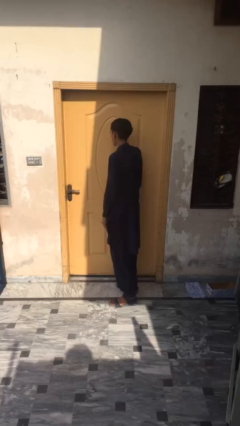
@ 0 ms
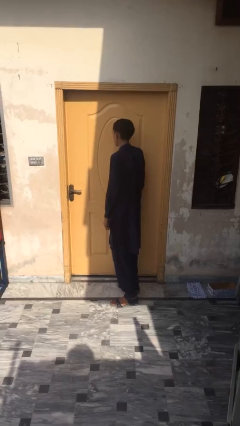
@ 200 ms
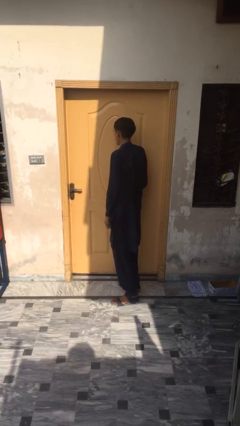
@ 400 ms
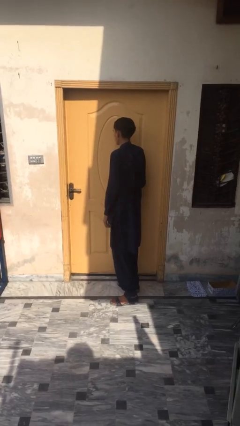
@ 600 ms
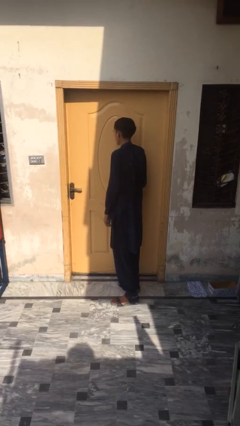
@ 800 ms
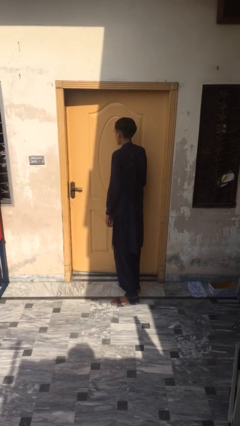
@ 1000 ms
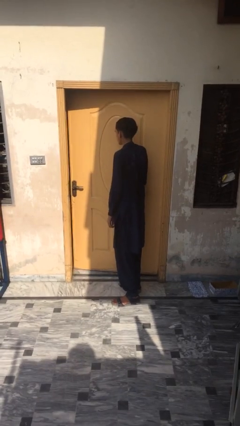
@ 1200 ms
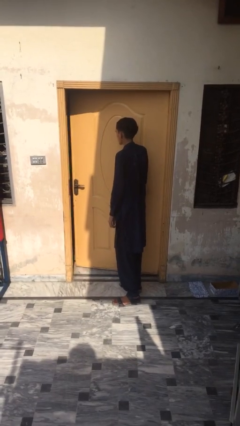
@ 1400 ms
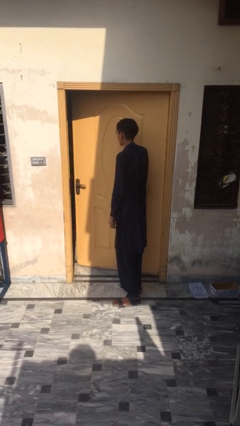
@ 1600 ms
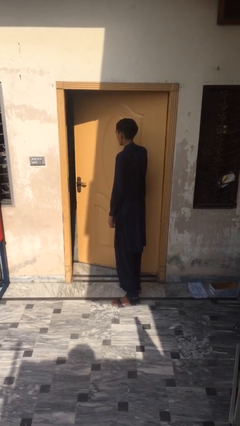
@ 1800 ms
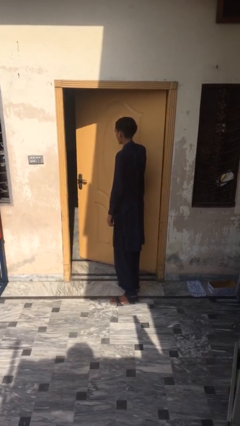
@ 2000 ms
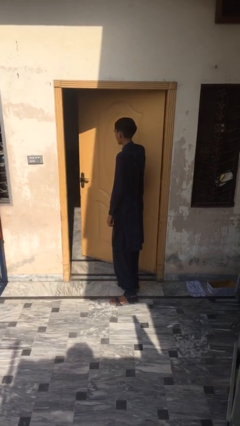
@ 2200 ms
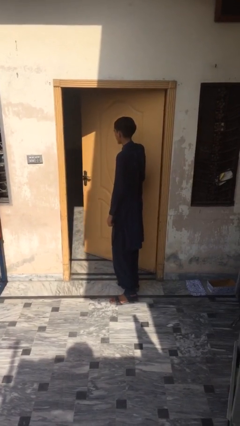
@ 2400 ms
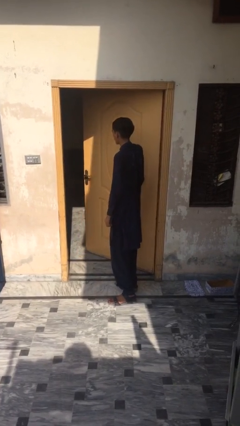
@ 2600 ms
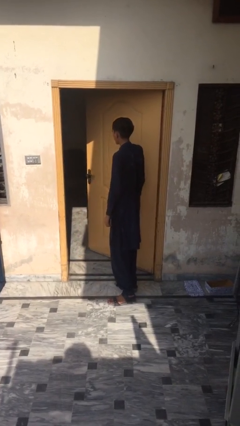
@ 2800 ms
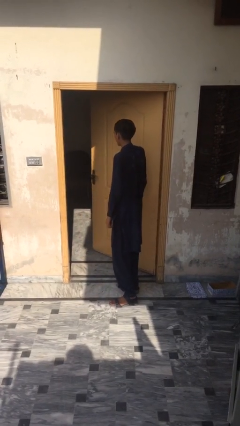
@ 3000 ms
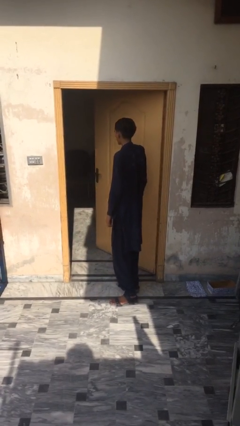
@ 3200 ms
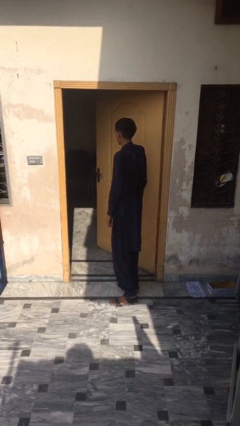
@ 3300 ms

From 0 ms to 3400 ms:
person opens facility door

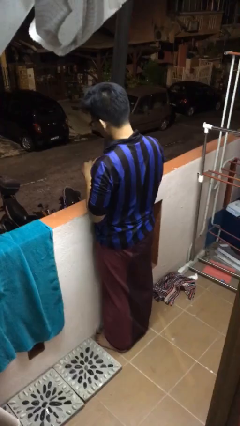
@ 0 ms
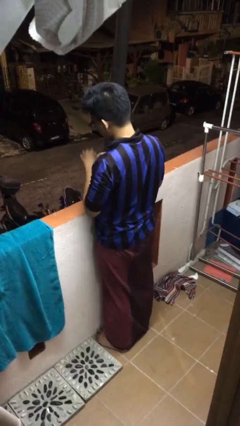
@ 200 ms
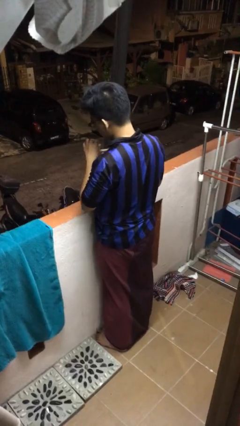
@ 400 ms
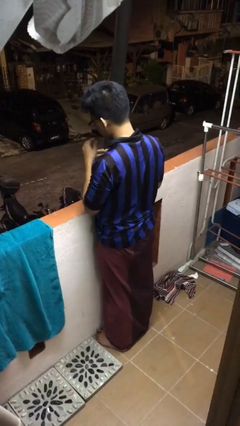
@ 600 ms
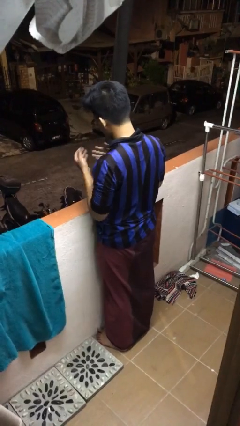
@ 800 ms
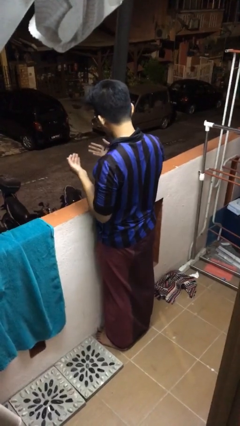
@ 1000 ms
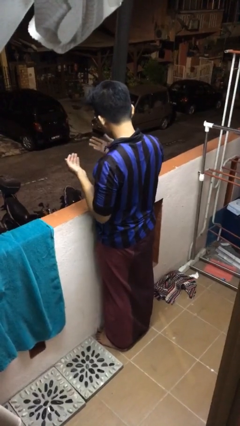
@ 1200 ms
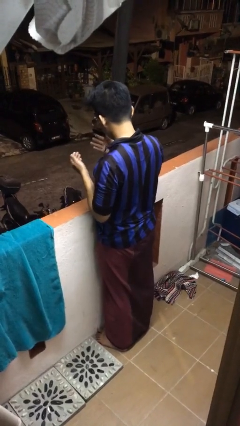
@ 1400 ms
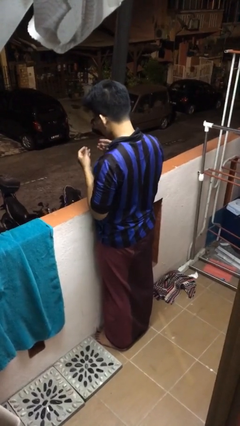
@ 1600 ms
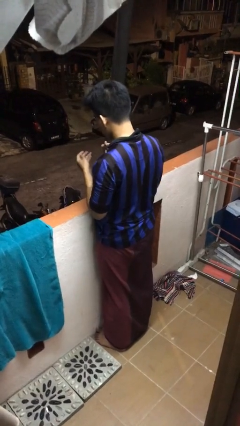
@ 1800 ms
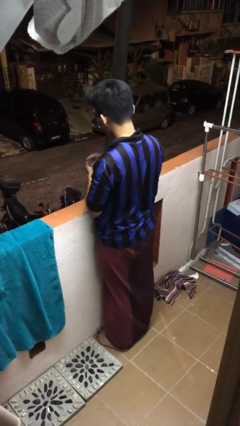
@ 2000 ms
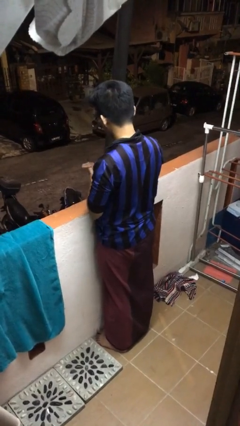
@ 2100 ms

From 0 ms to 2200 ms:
person blows into hands

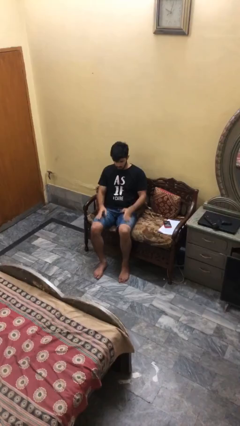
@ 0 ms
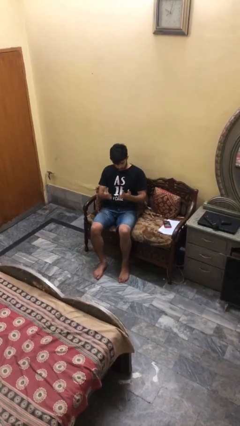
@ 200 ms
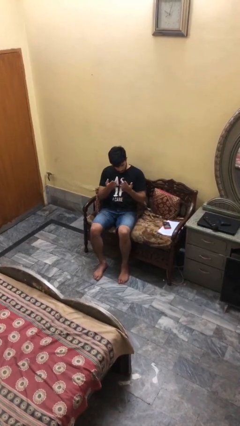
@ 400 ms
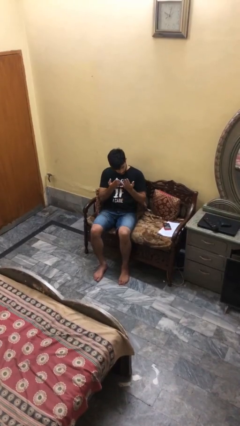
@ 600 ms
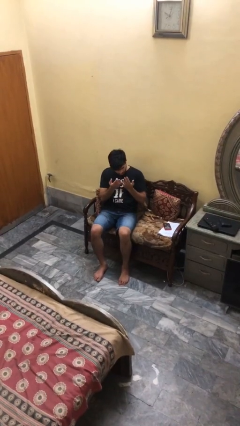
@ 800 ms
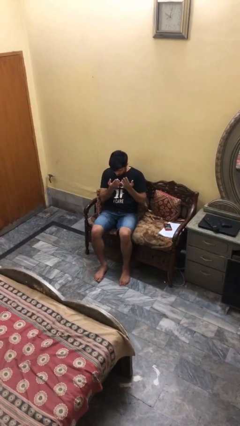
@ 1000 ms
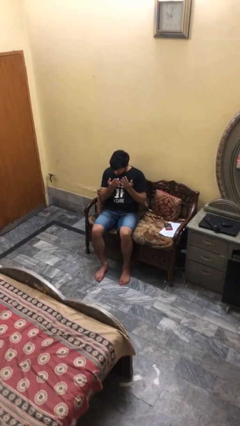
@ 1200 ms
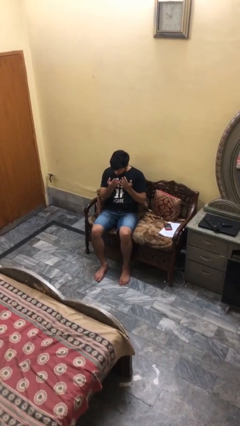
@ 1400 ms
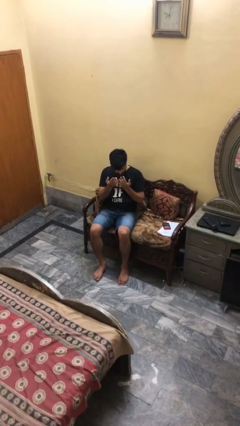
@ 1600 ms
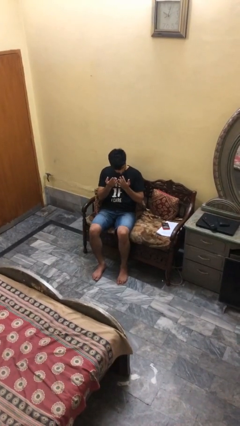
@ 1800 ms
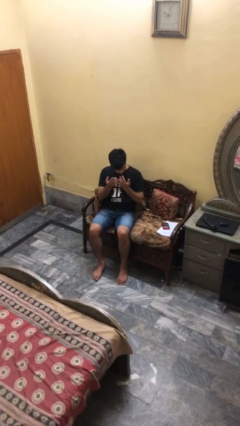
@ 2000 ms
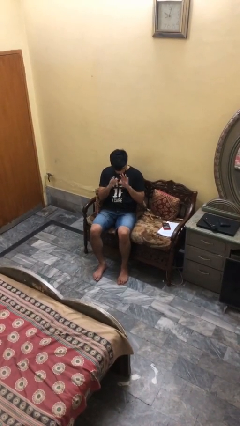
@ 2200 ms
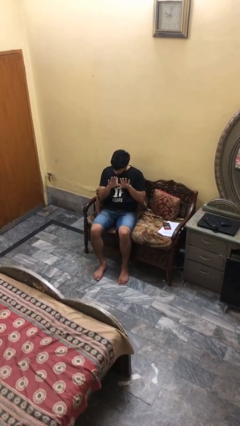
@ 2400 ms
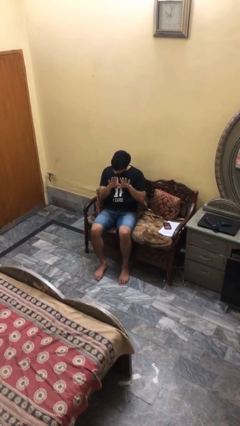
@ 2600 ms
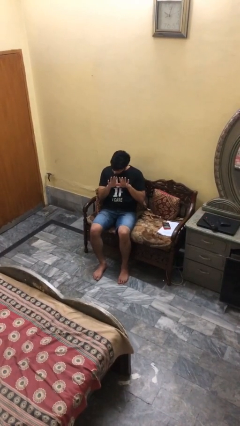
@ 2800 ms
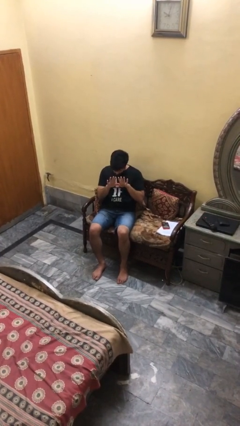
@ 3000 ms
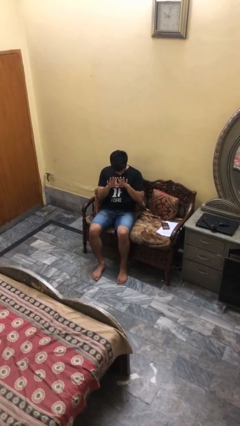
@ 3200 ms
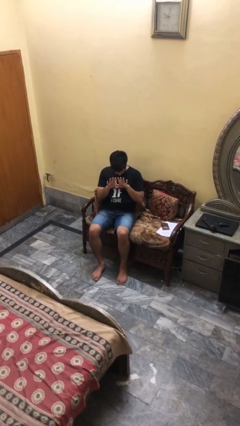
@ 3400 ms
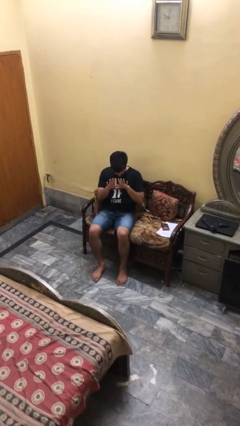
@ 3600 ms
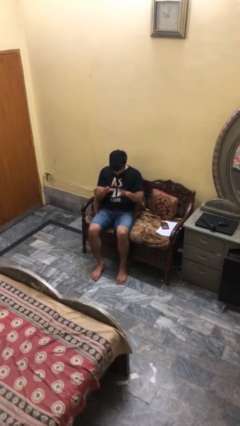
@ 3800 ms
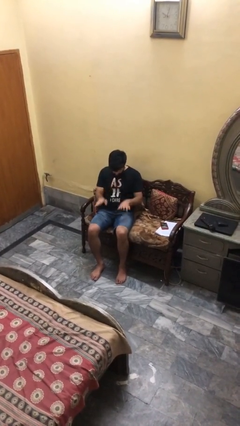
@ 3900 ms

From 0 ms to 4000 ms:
person looks at hands in lap

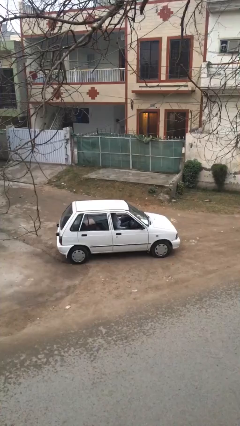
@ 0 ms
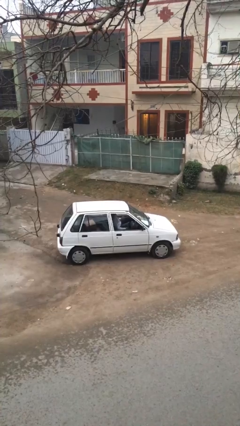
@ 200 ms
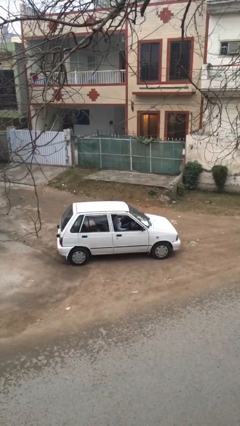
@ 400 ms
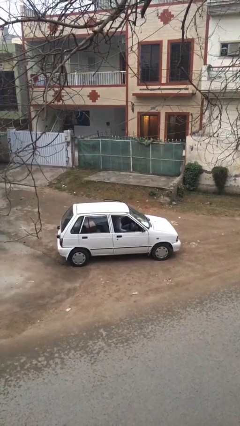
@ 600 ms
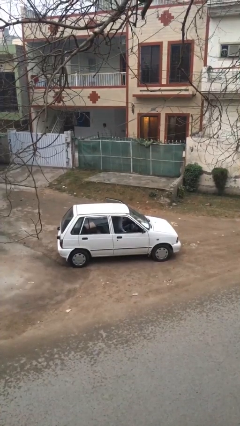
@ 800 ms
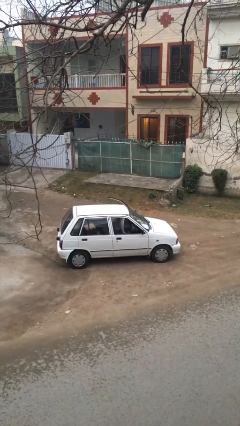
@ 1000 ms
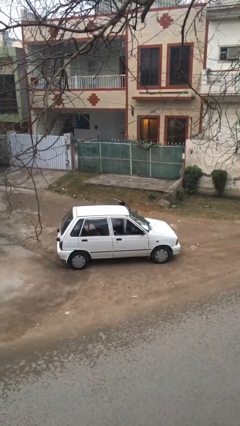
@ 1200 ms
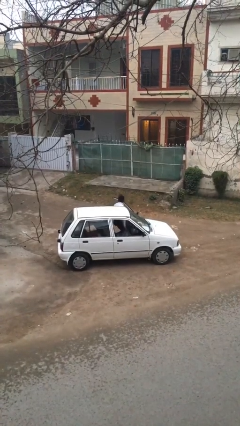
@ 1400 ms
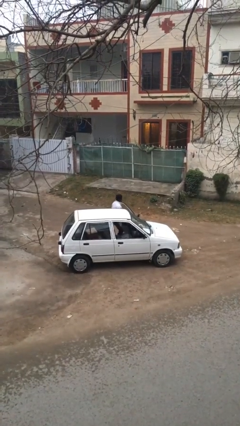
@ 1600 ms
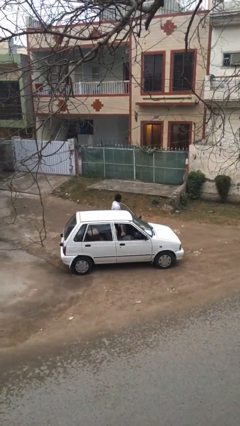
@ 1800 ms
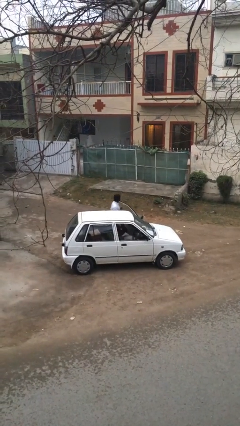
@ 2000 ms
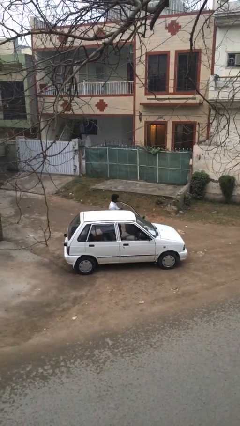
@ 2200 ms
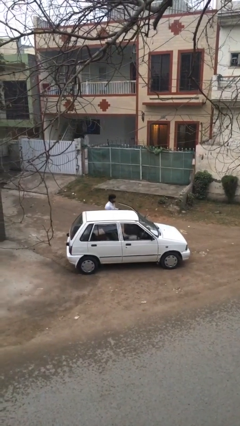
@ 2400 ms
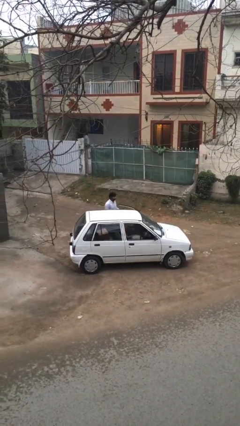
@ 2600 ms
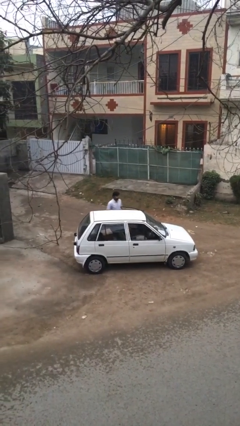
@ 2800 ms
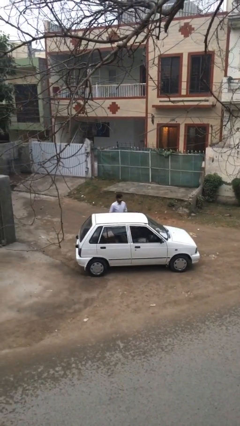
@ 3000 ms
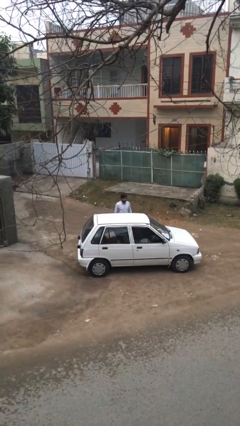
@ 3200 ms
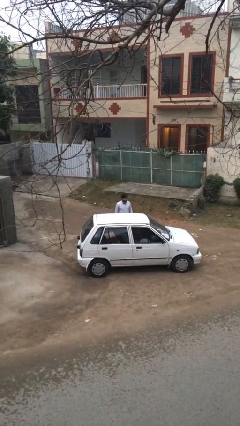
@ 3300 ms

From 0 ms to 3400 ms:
person exits car

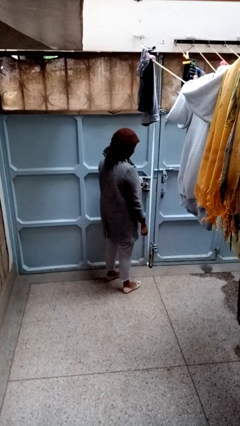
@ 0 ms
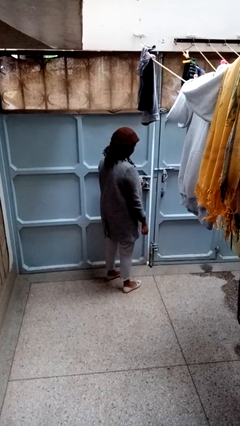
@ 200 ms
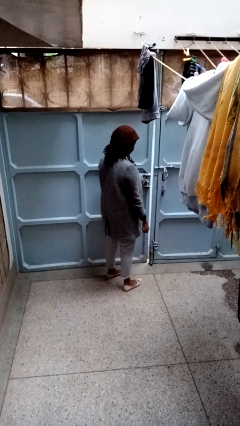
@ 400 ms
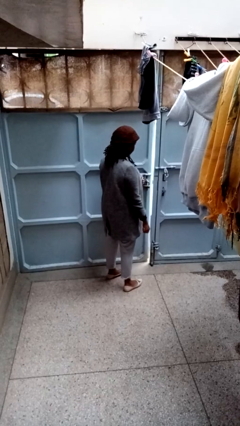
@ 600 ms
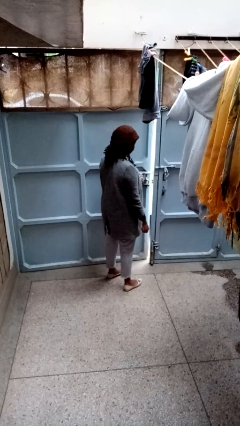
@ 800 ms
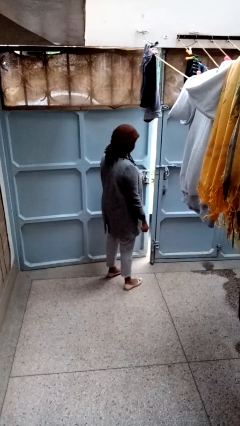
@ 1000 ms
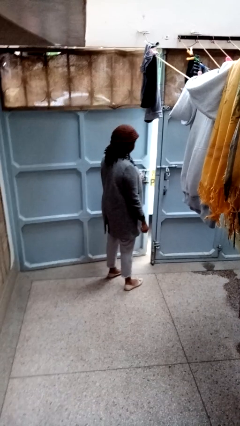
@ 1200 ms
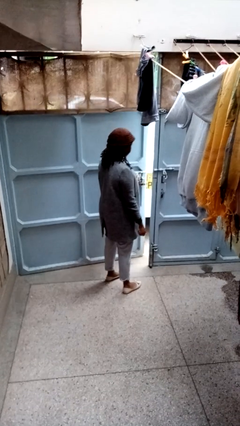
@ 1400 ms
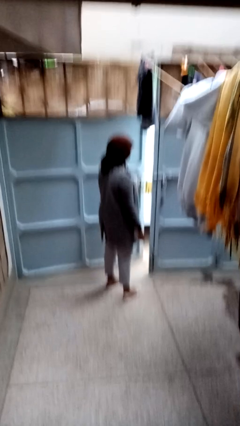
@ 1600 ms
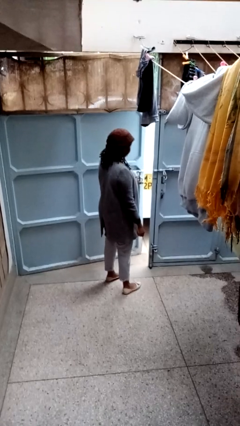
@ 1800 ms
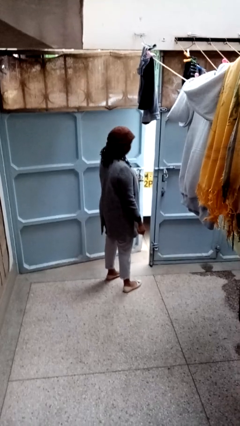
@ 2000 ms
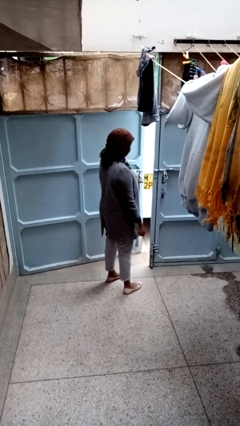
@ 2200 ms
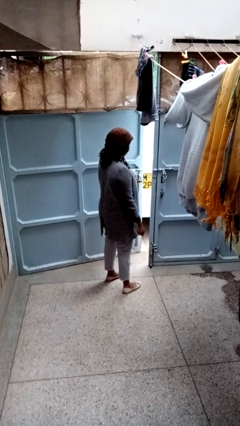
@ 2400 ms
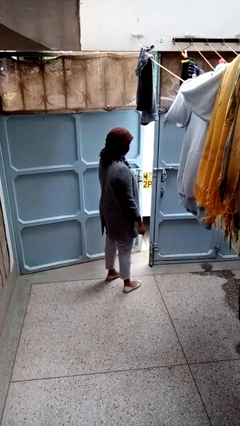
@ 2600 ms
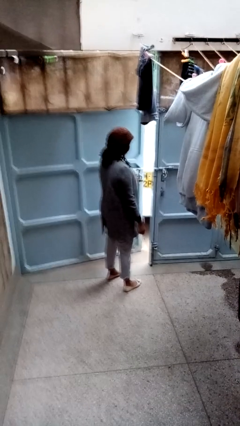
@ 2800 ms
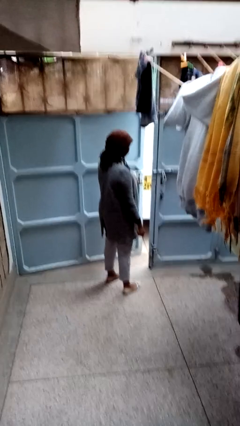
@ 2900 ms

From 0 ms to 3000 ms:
person opens gate

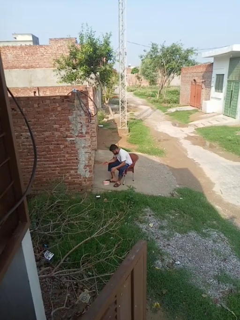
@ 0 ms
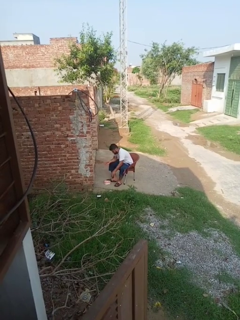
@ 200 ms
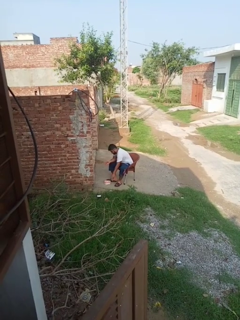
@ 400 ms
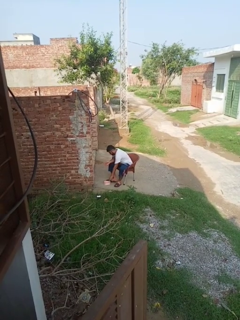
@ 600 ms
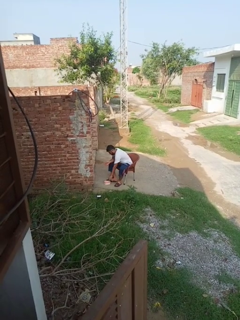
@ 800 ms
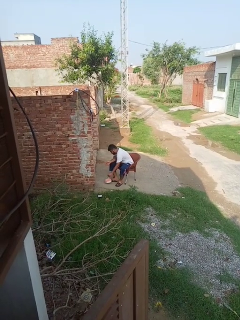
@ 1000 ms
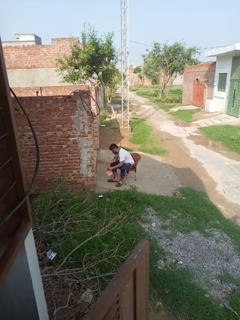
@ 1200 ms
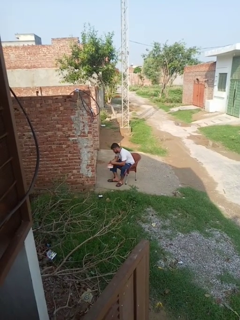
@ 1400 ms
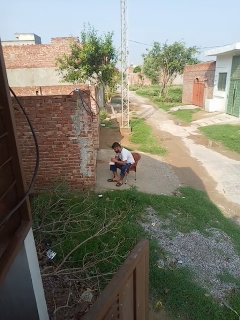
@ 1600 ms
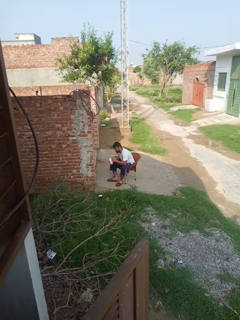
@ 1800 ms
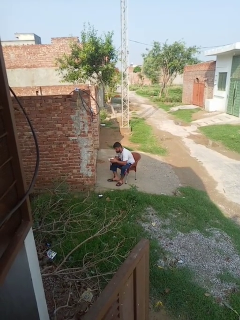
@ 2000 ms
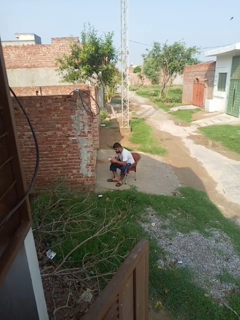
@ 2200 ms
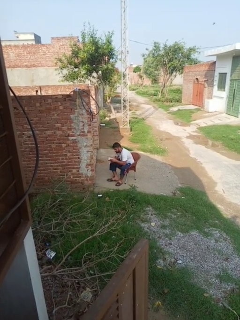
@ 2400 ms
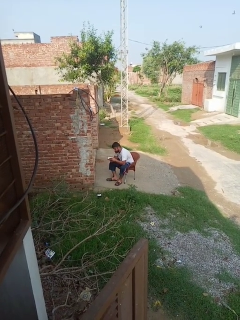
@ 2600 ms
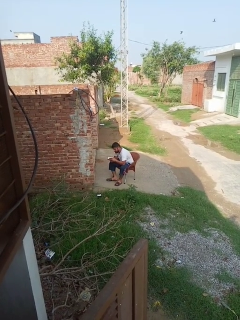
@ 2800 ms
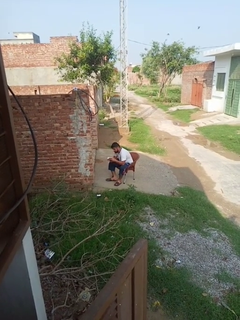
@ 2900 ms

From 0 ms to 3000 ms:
person picks up object from floor
